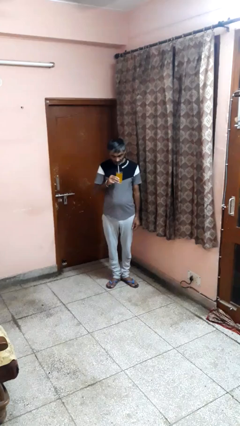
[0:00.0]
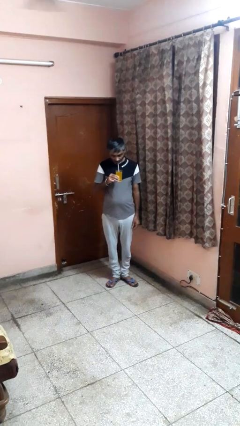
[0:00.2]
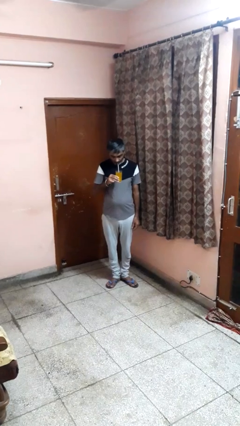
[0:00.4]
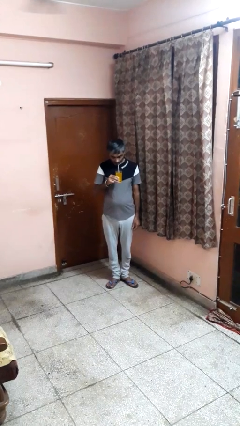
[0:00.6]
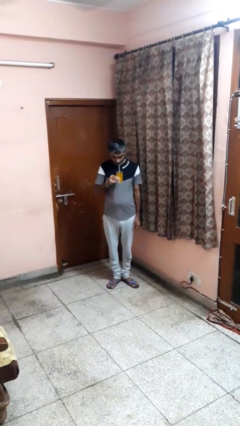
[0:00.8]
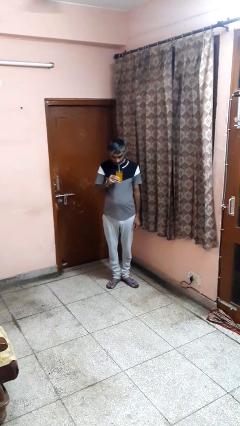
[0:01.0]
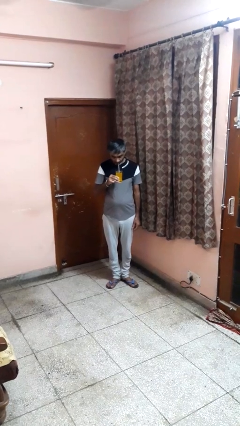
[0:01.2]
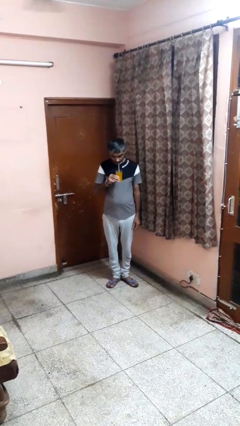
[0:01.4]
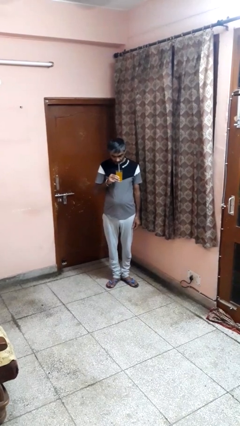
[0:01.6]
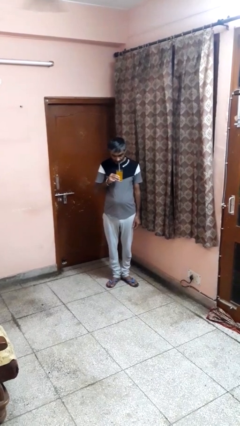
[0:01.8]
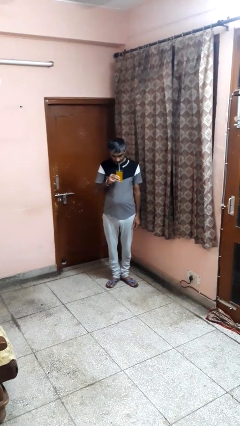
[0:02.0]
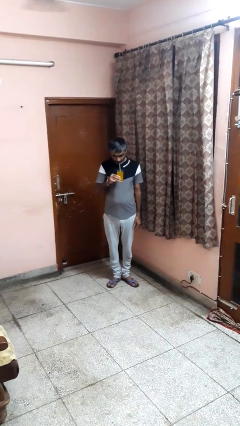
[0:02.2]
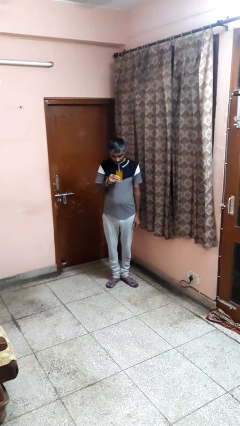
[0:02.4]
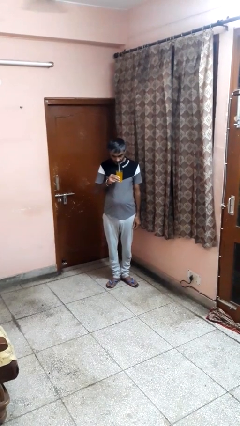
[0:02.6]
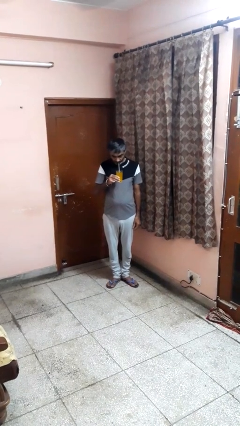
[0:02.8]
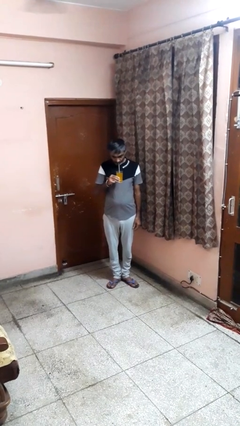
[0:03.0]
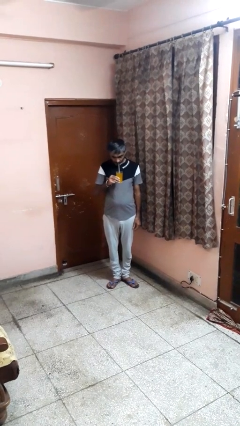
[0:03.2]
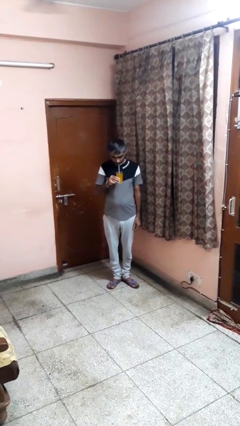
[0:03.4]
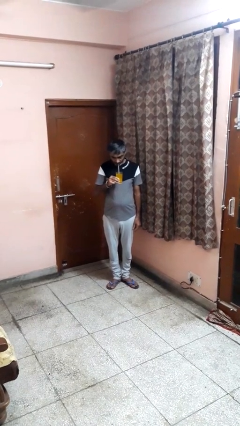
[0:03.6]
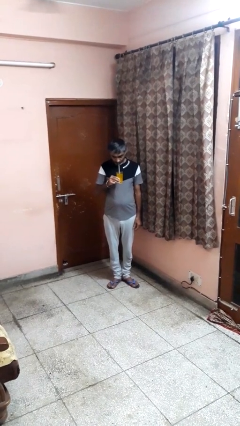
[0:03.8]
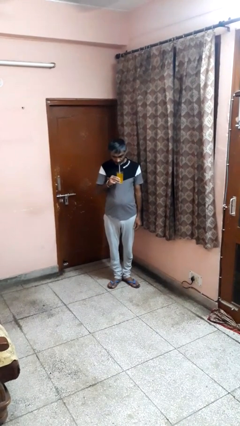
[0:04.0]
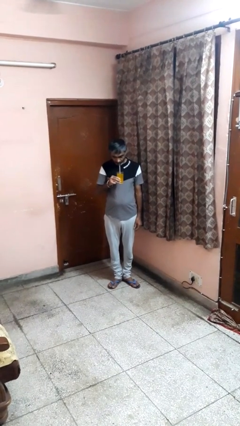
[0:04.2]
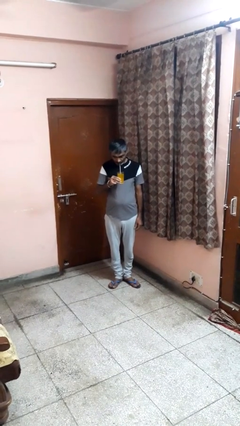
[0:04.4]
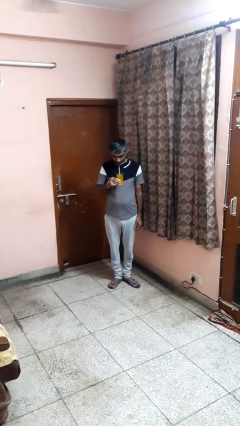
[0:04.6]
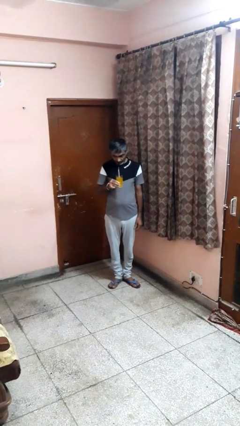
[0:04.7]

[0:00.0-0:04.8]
person drinks from straw

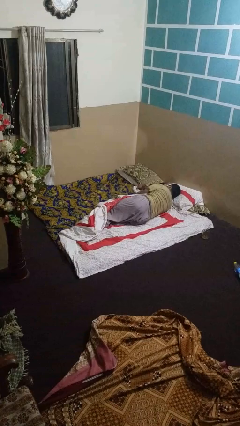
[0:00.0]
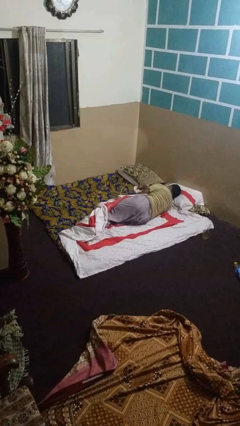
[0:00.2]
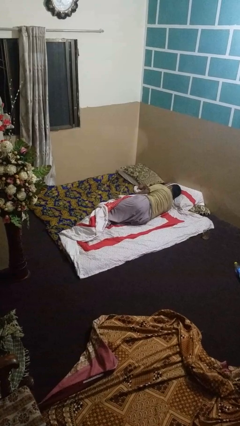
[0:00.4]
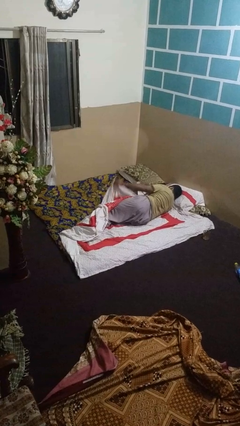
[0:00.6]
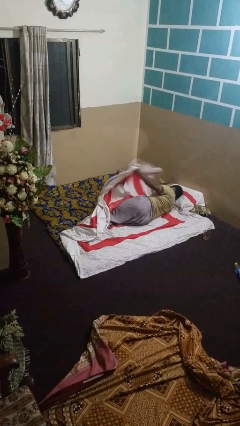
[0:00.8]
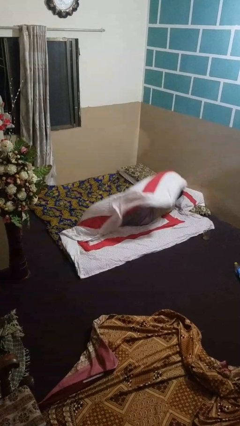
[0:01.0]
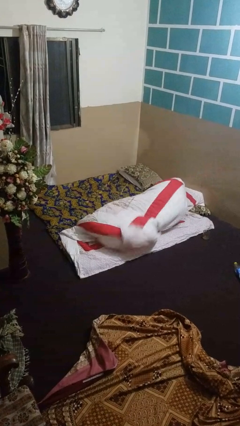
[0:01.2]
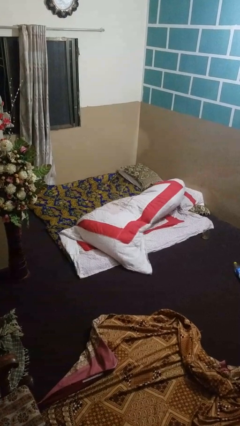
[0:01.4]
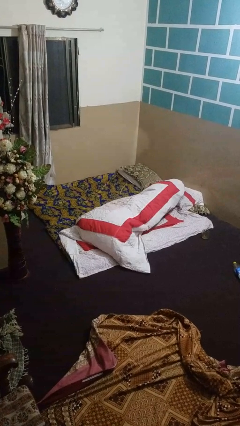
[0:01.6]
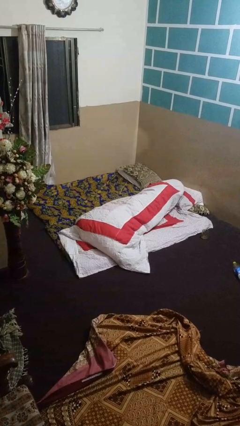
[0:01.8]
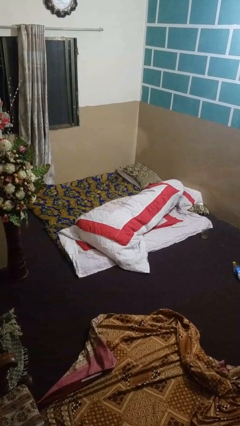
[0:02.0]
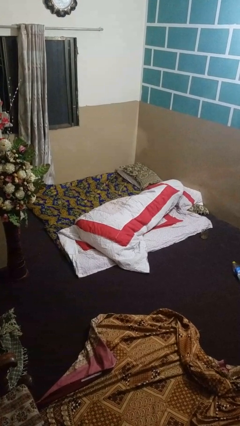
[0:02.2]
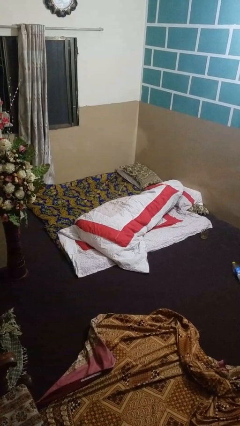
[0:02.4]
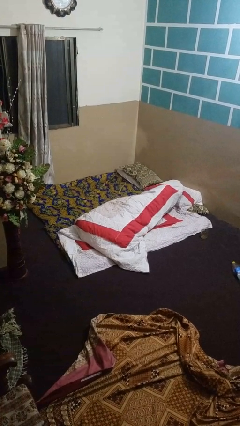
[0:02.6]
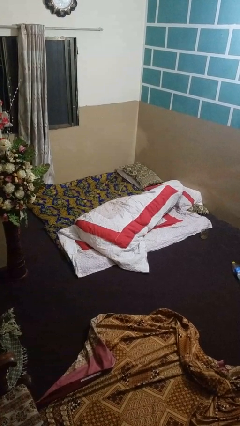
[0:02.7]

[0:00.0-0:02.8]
person covers with bedsheets

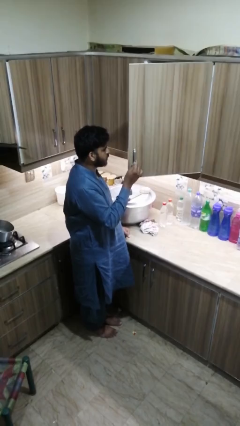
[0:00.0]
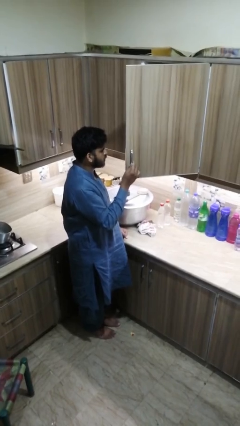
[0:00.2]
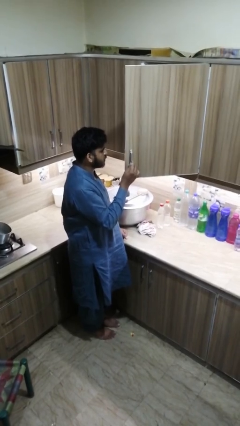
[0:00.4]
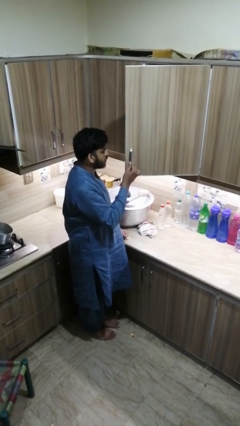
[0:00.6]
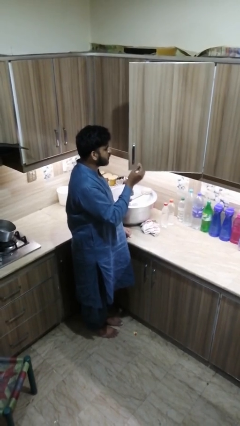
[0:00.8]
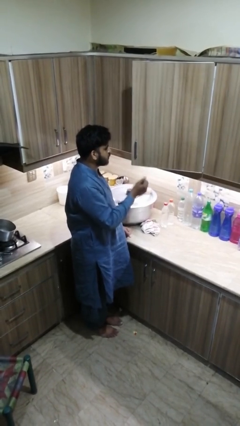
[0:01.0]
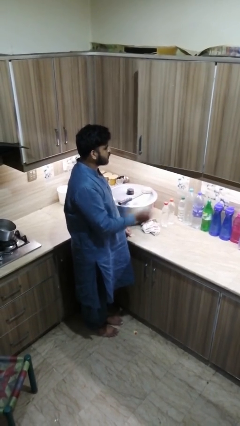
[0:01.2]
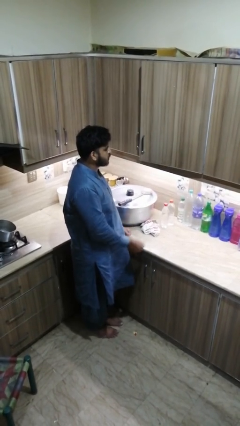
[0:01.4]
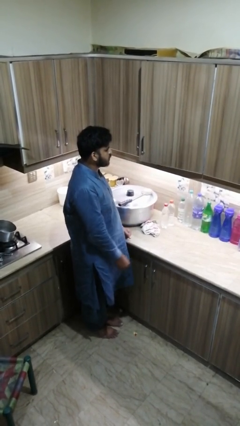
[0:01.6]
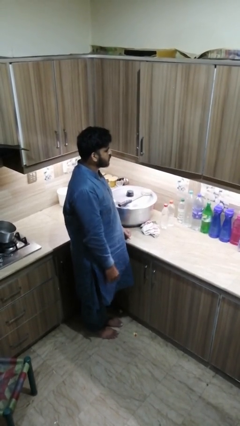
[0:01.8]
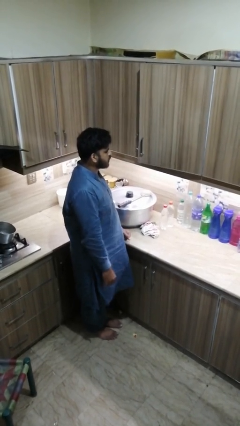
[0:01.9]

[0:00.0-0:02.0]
person closes kitchen drawer

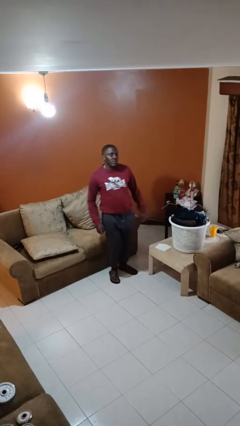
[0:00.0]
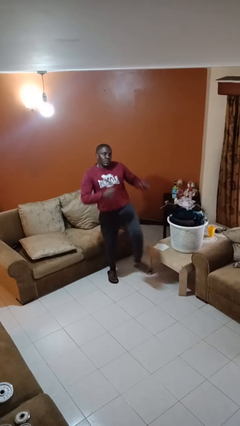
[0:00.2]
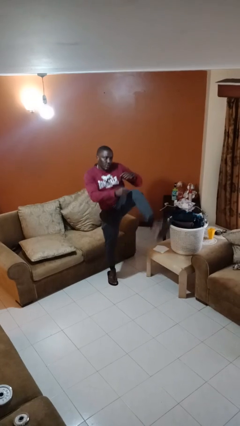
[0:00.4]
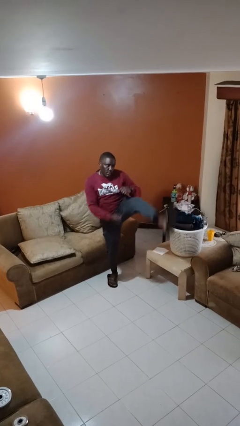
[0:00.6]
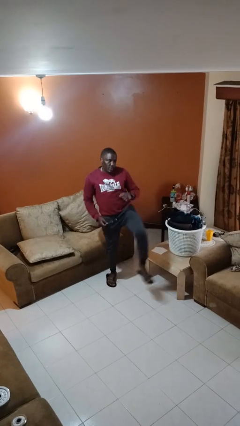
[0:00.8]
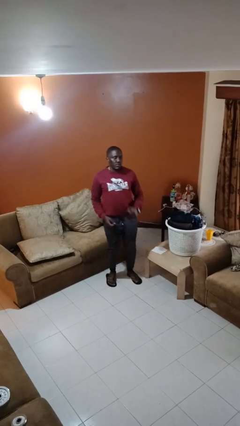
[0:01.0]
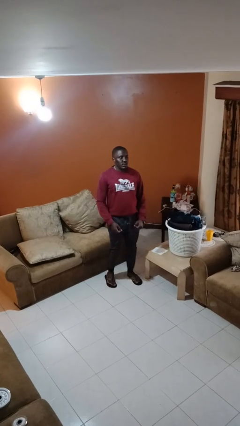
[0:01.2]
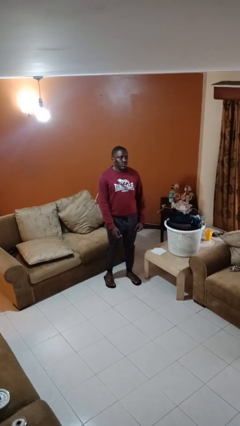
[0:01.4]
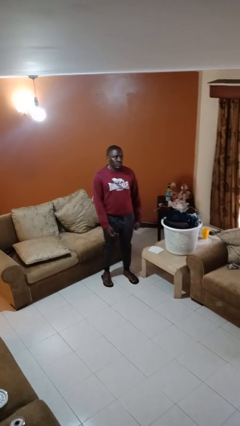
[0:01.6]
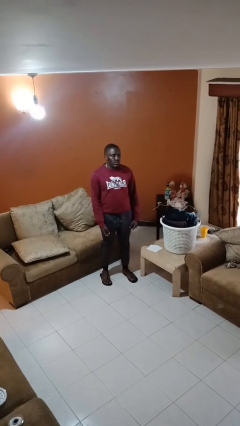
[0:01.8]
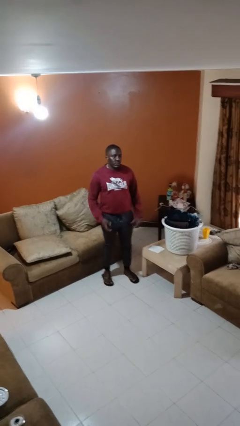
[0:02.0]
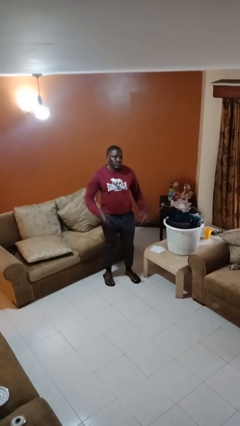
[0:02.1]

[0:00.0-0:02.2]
person karate kicks

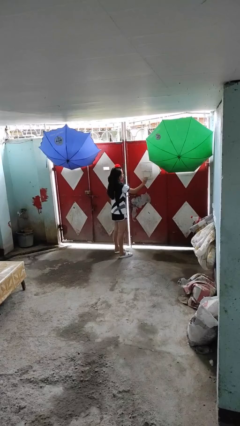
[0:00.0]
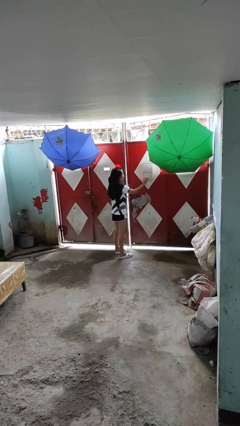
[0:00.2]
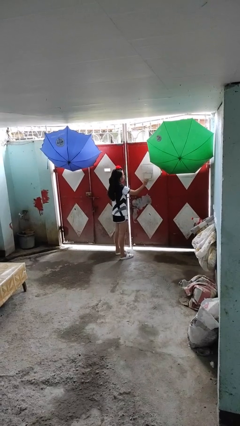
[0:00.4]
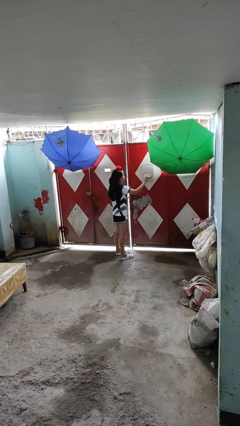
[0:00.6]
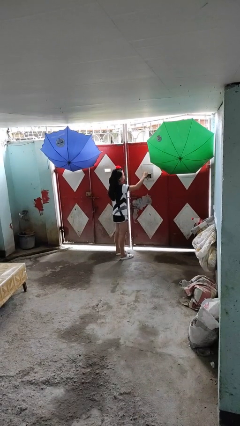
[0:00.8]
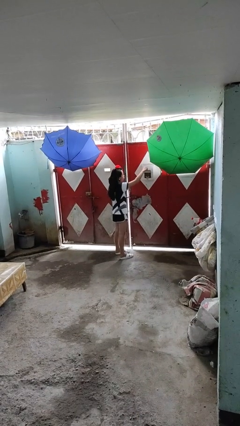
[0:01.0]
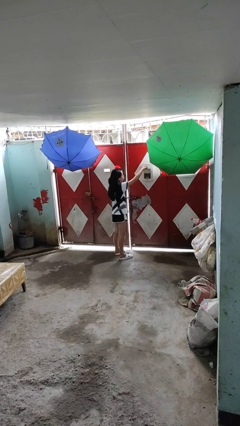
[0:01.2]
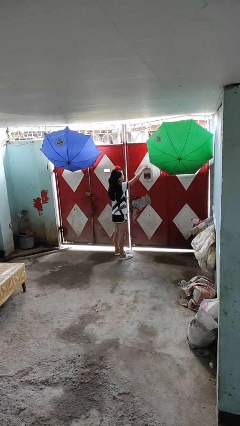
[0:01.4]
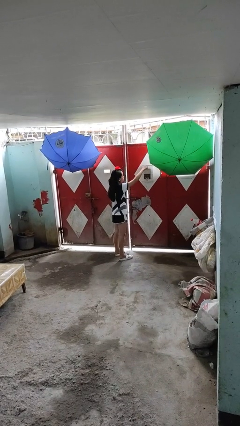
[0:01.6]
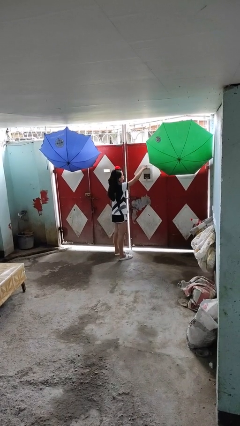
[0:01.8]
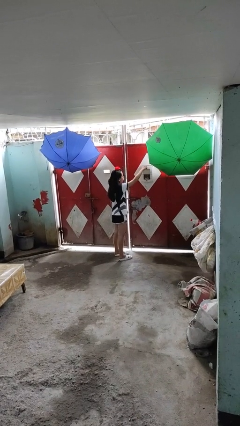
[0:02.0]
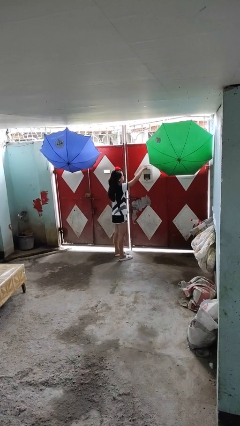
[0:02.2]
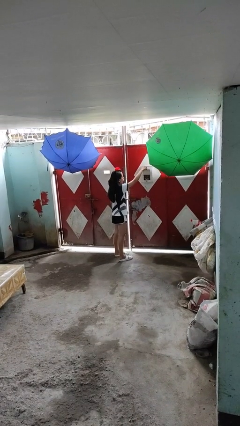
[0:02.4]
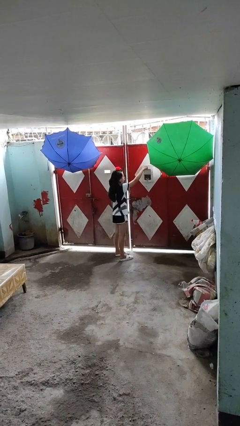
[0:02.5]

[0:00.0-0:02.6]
person opens mailbox

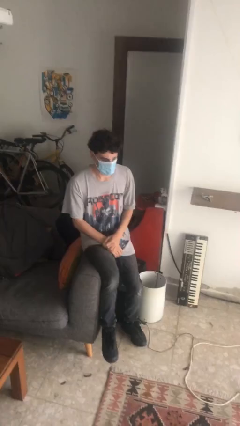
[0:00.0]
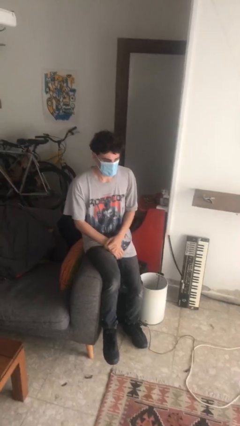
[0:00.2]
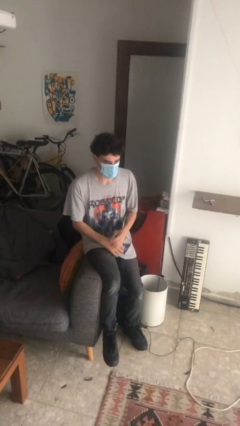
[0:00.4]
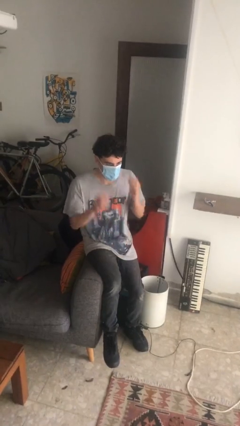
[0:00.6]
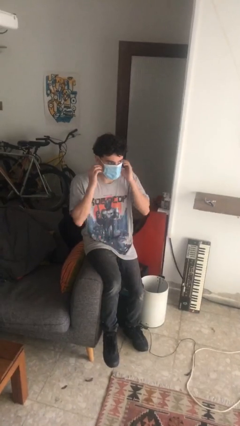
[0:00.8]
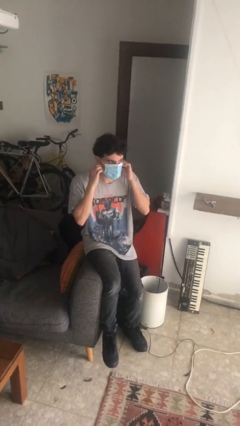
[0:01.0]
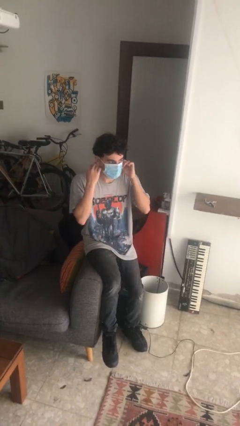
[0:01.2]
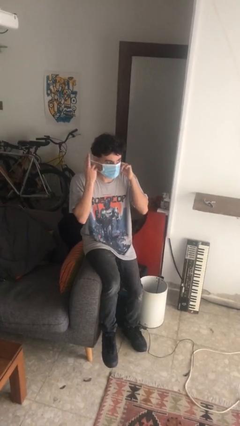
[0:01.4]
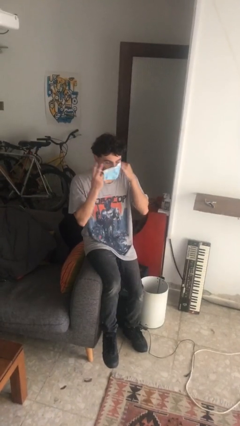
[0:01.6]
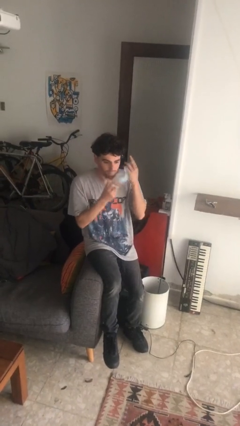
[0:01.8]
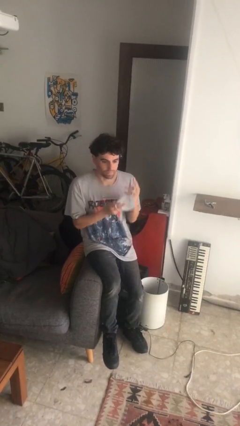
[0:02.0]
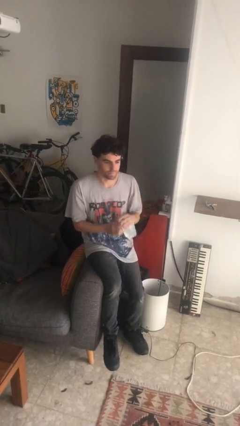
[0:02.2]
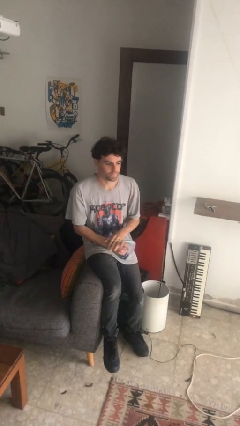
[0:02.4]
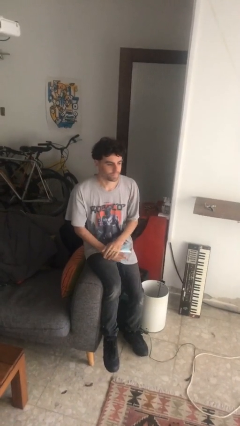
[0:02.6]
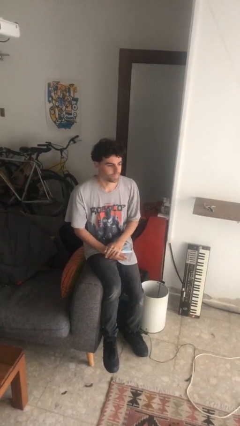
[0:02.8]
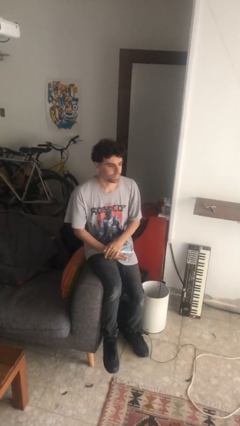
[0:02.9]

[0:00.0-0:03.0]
person takes off facemask
